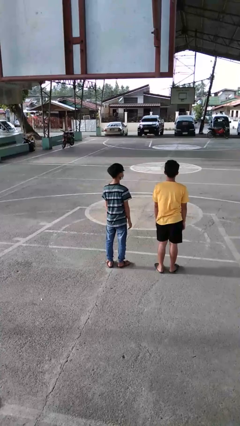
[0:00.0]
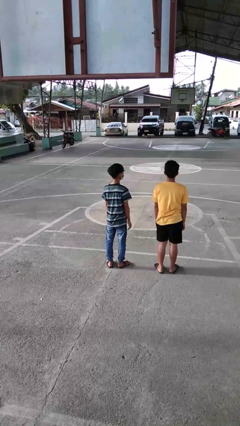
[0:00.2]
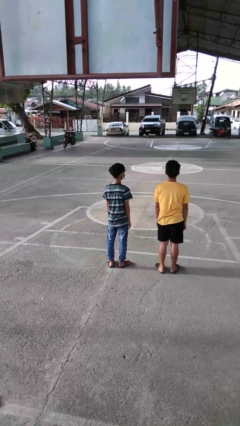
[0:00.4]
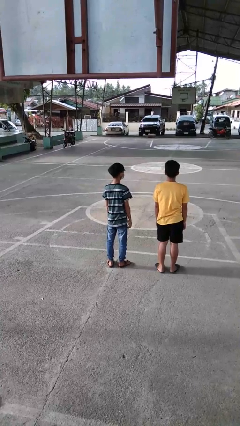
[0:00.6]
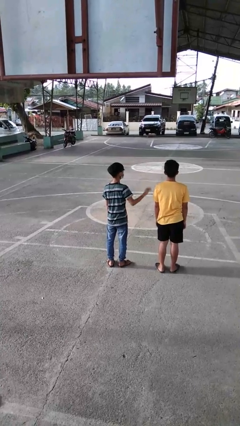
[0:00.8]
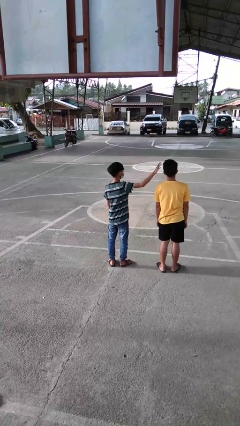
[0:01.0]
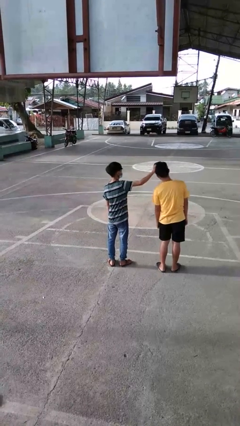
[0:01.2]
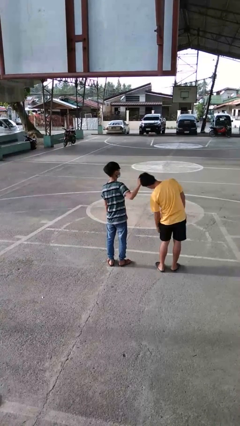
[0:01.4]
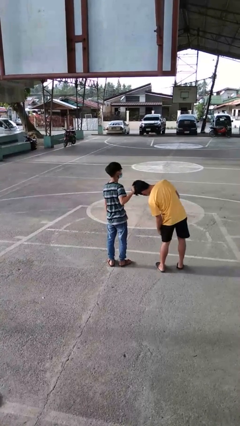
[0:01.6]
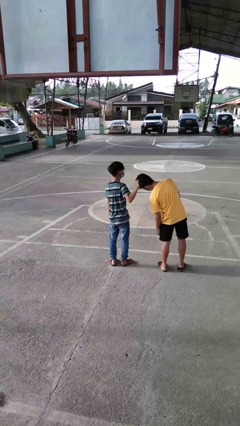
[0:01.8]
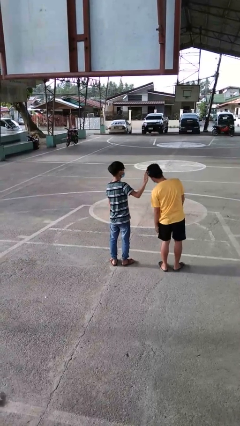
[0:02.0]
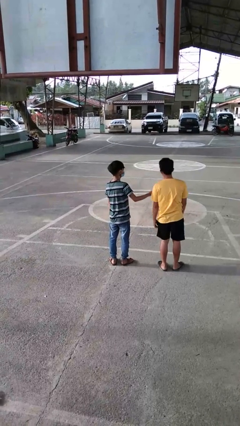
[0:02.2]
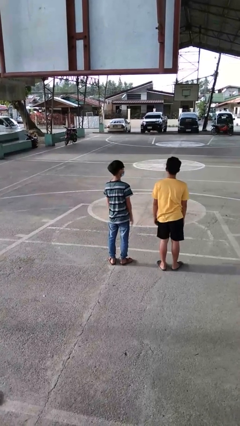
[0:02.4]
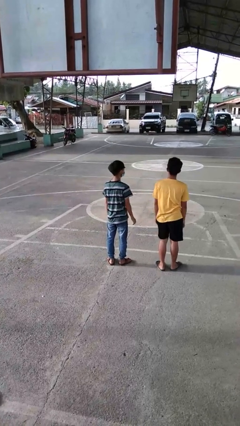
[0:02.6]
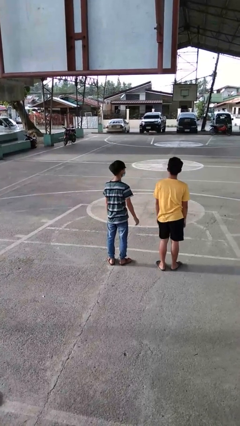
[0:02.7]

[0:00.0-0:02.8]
person grabs person by hair

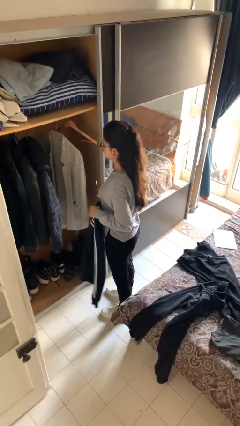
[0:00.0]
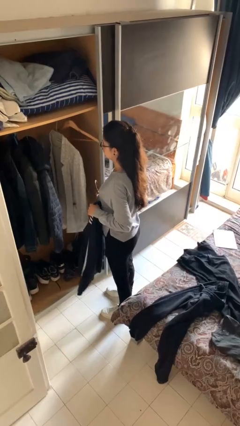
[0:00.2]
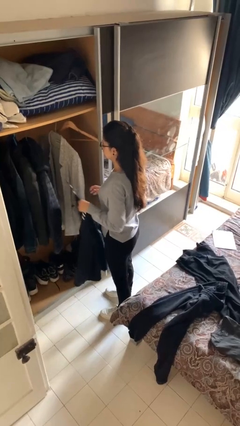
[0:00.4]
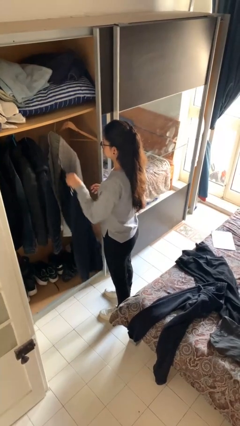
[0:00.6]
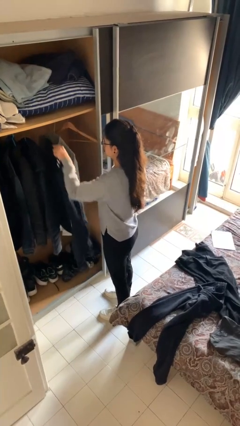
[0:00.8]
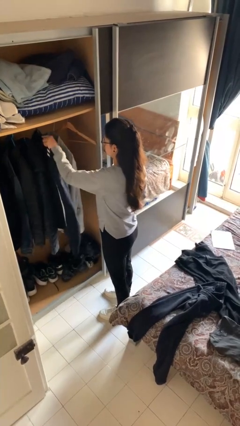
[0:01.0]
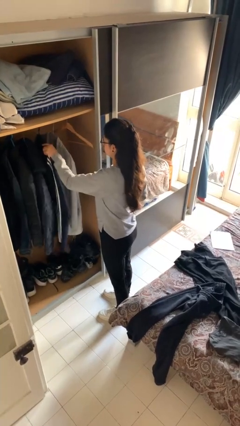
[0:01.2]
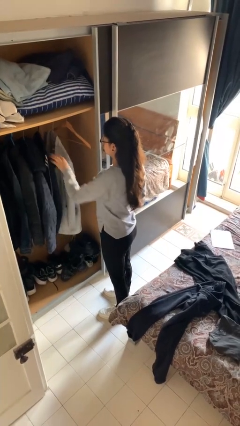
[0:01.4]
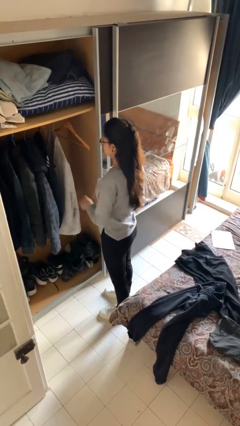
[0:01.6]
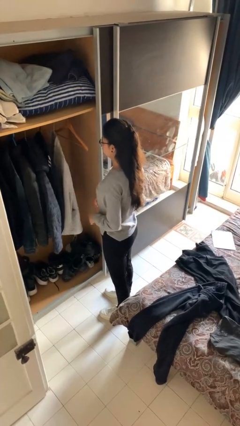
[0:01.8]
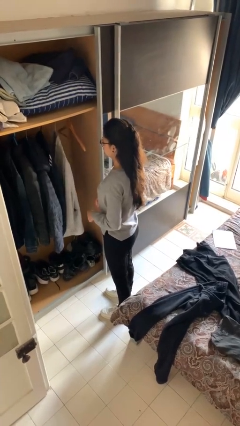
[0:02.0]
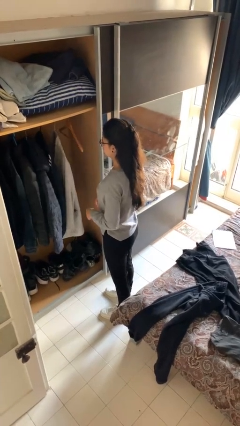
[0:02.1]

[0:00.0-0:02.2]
person puts clothes into closet

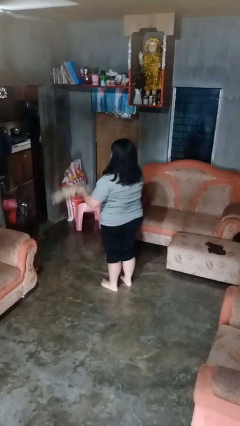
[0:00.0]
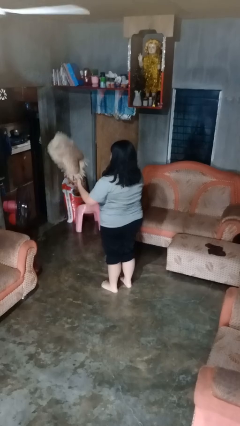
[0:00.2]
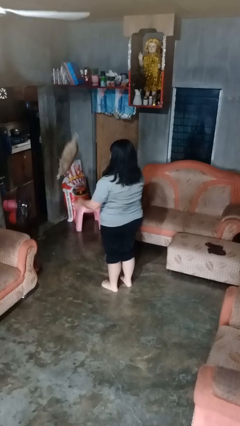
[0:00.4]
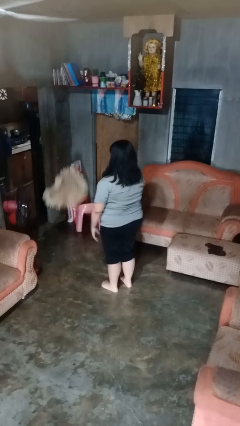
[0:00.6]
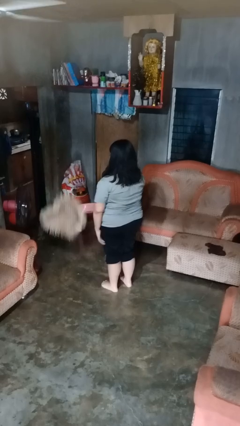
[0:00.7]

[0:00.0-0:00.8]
person throws object into air

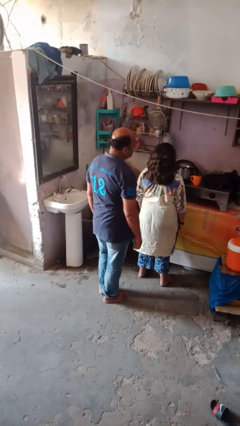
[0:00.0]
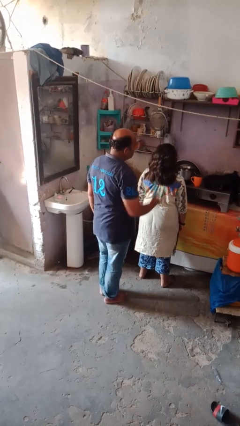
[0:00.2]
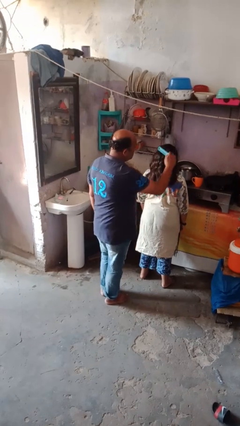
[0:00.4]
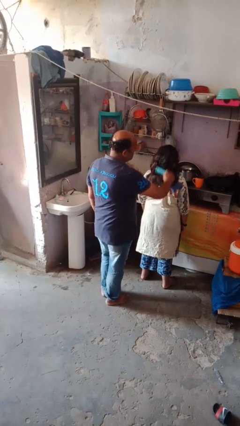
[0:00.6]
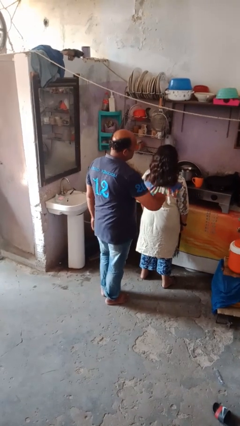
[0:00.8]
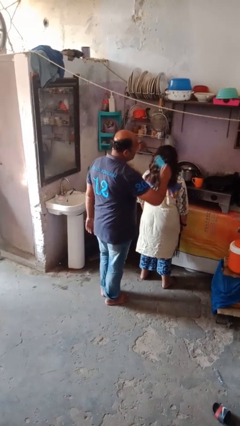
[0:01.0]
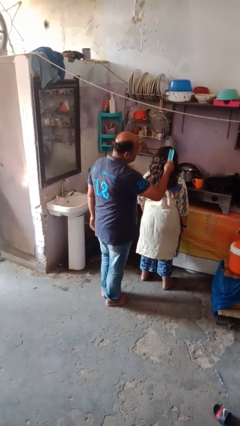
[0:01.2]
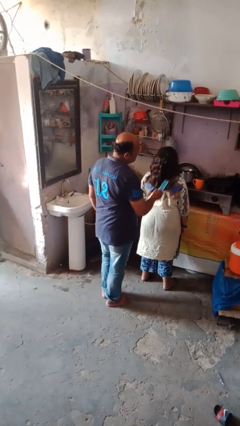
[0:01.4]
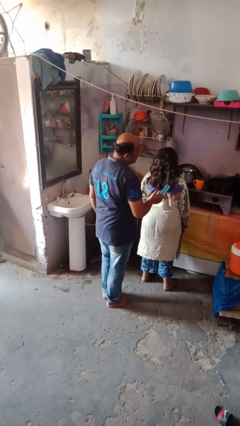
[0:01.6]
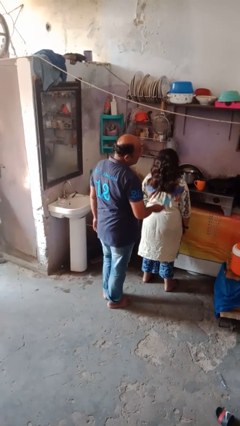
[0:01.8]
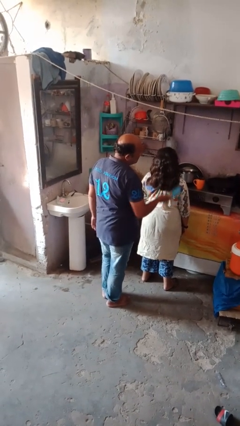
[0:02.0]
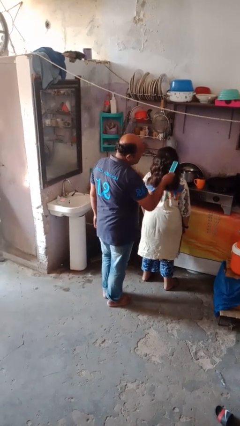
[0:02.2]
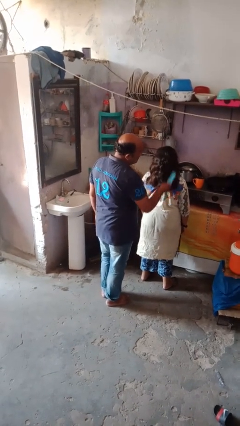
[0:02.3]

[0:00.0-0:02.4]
person brushes hair of person

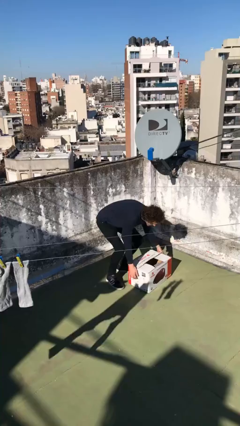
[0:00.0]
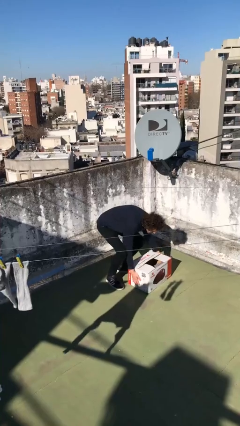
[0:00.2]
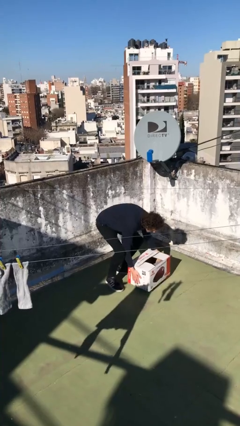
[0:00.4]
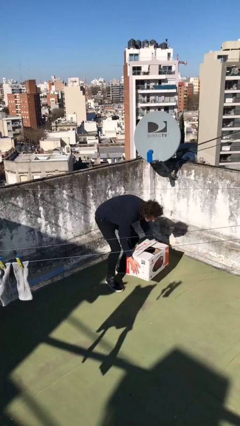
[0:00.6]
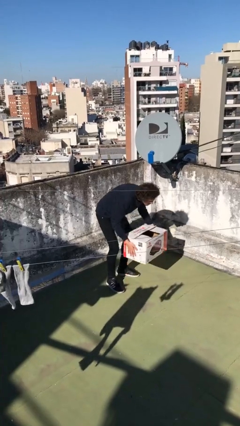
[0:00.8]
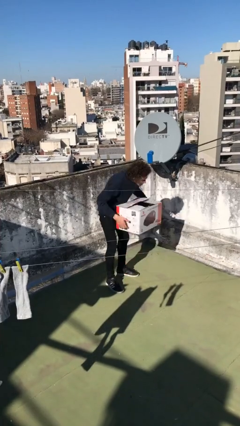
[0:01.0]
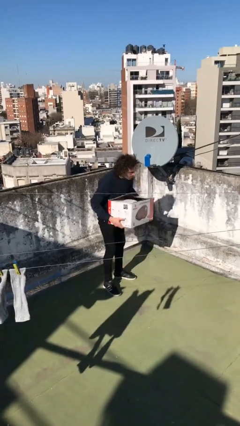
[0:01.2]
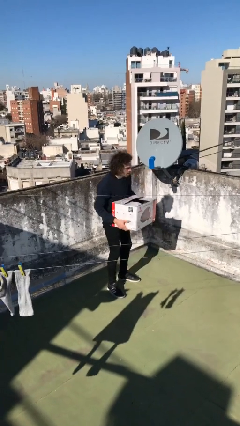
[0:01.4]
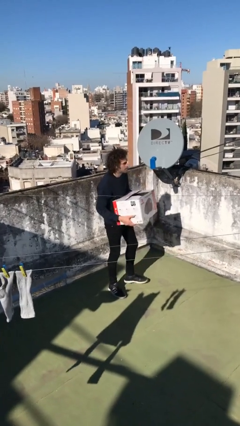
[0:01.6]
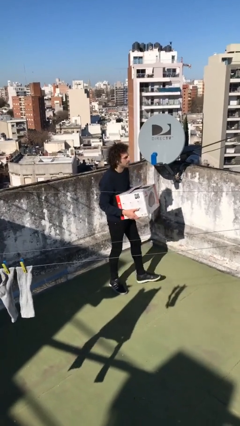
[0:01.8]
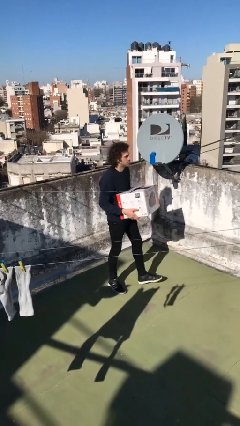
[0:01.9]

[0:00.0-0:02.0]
person picks up object from floor

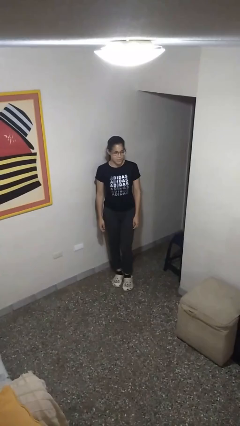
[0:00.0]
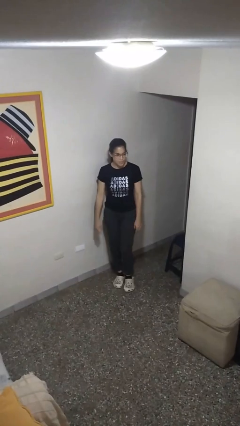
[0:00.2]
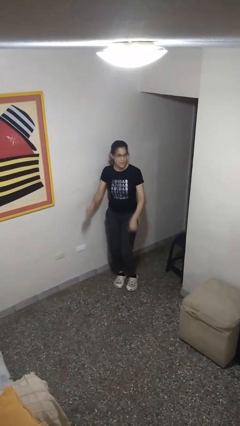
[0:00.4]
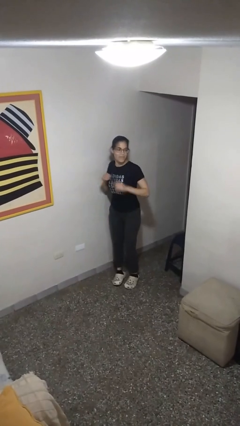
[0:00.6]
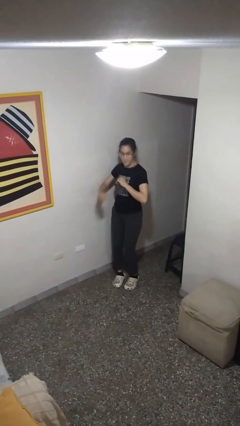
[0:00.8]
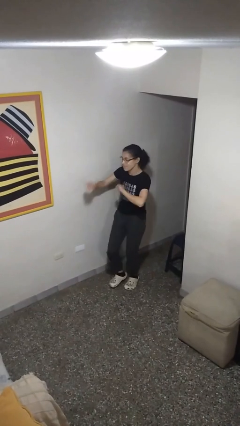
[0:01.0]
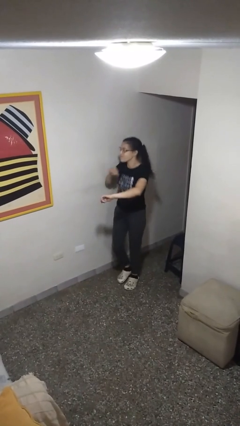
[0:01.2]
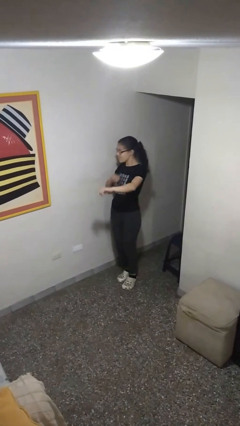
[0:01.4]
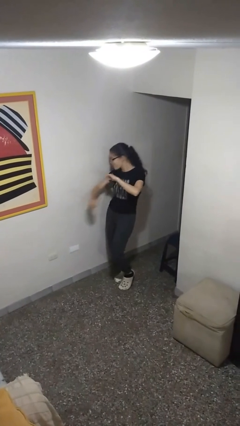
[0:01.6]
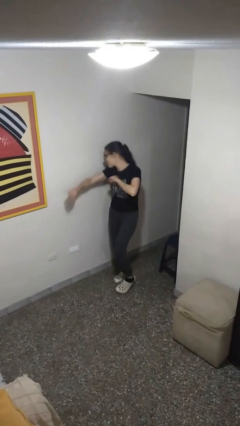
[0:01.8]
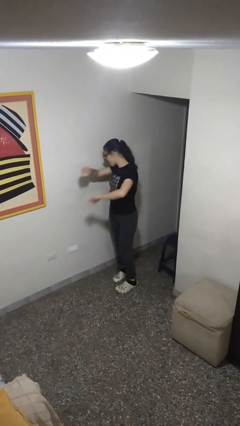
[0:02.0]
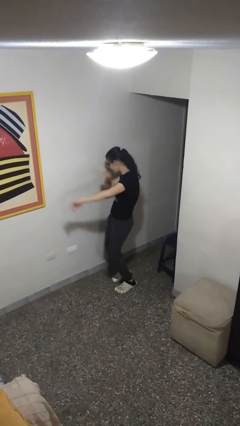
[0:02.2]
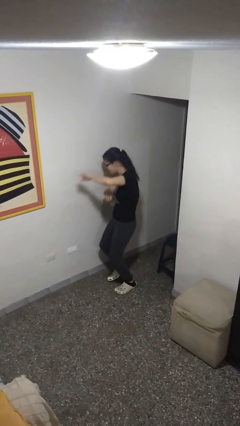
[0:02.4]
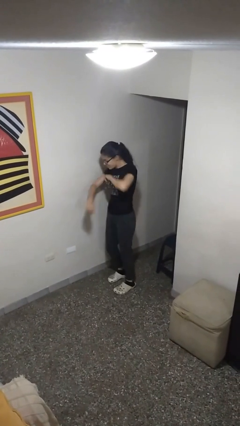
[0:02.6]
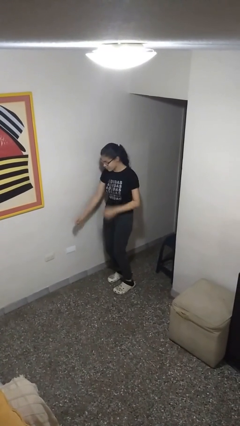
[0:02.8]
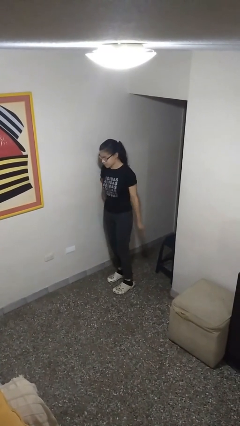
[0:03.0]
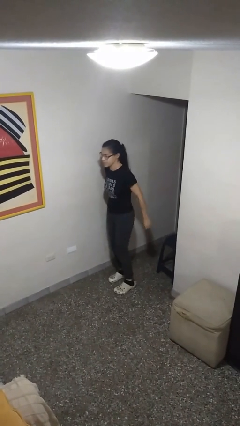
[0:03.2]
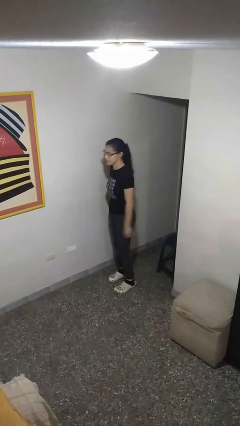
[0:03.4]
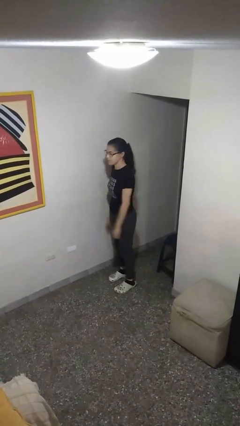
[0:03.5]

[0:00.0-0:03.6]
person dances in place

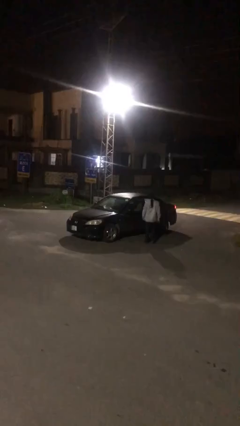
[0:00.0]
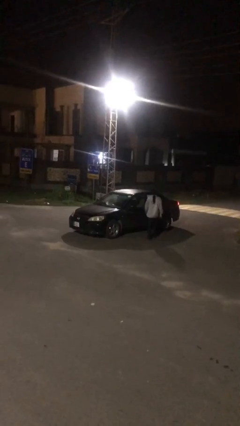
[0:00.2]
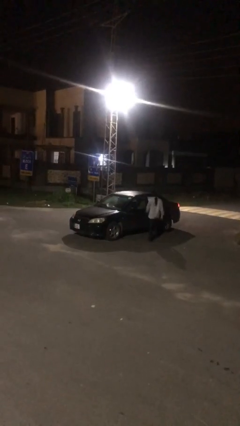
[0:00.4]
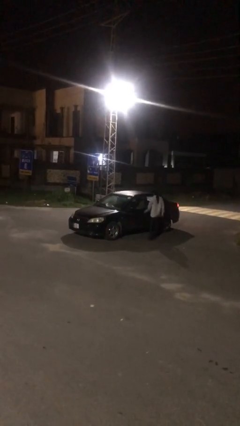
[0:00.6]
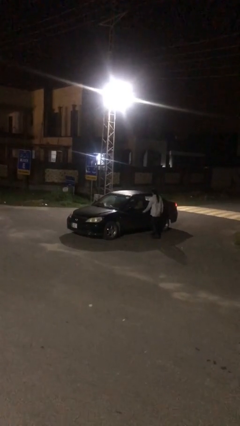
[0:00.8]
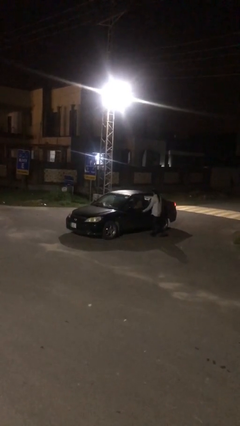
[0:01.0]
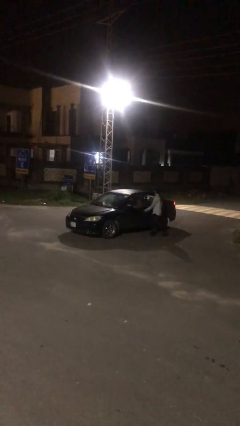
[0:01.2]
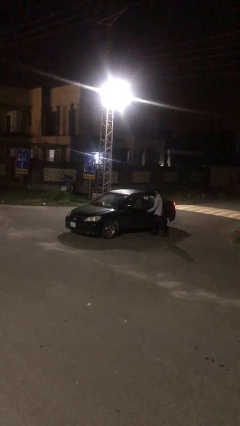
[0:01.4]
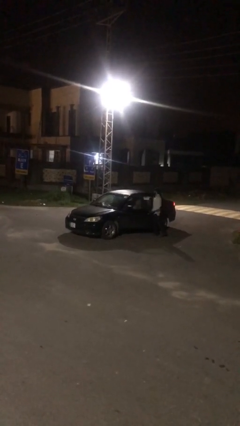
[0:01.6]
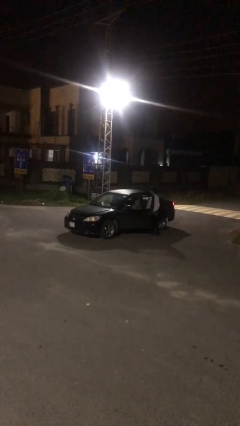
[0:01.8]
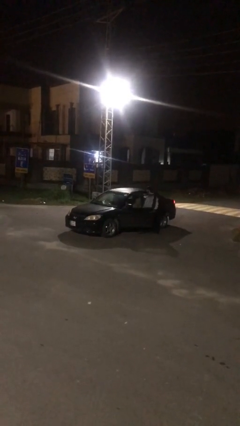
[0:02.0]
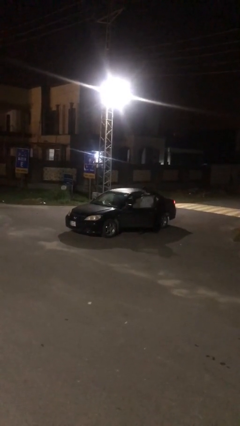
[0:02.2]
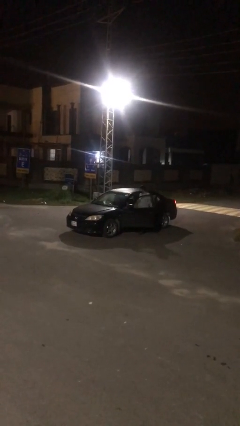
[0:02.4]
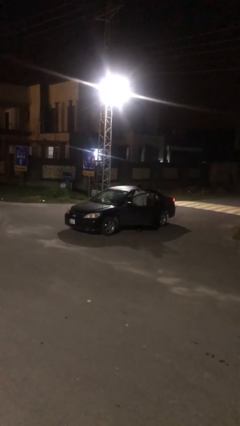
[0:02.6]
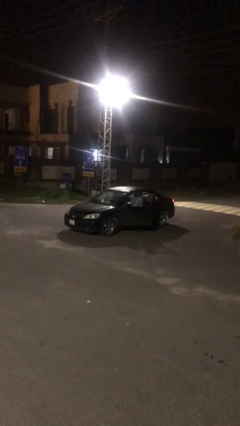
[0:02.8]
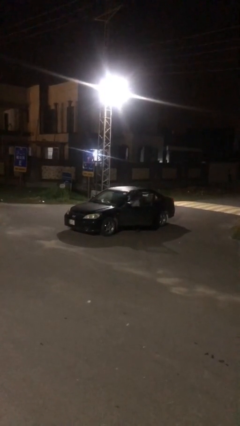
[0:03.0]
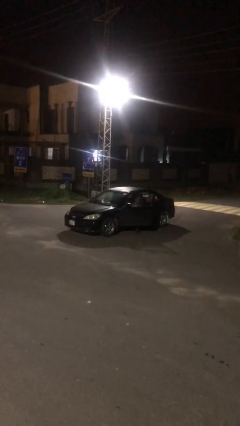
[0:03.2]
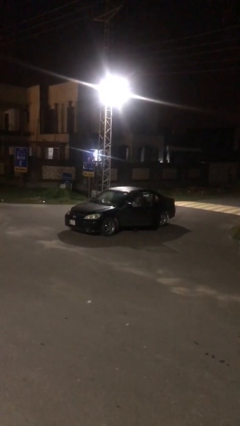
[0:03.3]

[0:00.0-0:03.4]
car picks up person
